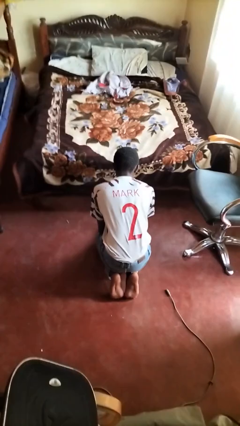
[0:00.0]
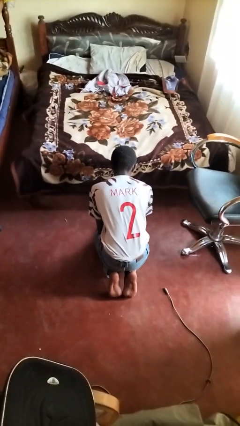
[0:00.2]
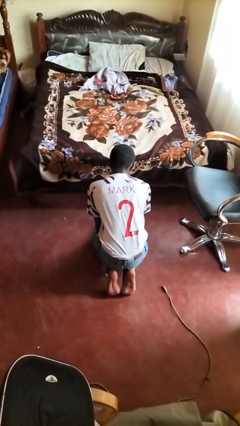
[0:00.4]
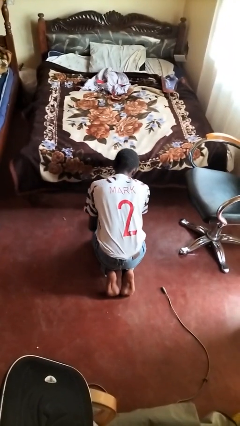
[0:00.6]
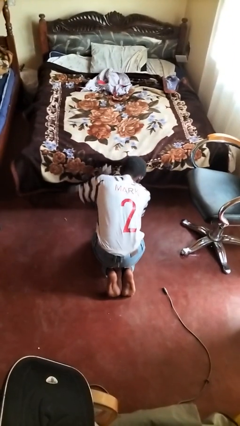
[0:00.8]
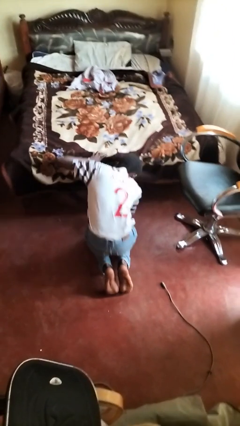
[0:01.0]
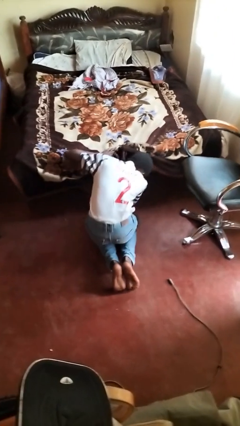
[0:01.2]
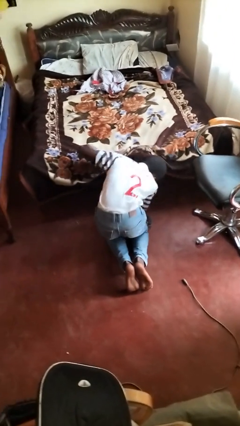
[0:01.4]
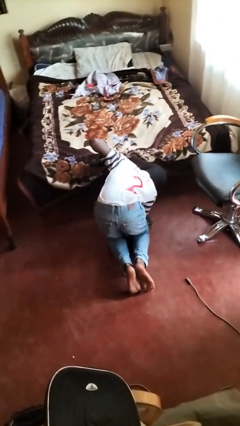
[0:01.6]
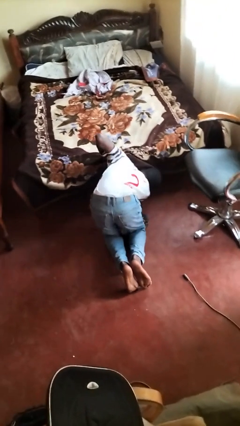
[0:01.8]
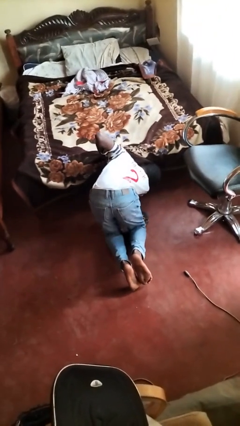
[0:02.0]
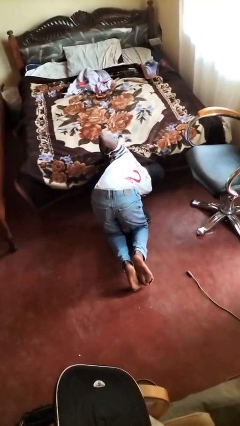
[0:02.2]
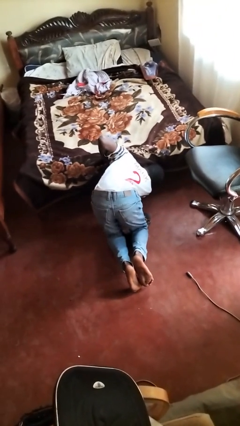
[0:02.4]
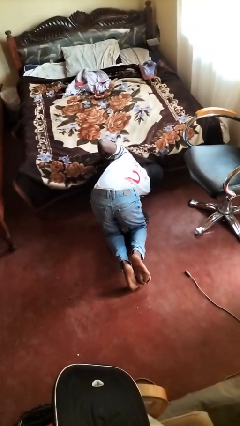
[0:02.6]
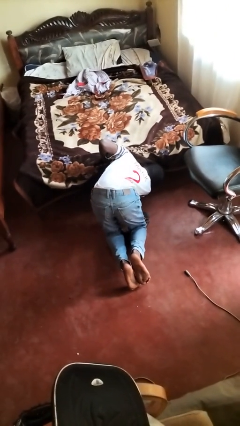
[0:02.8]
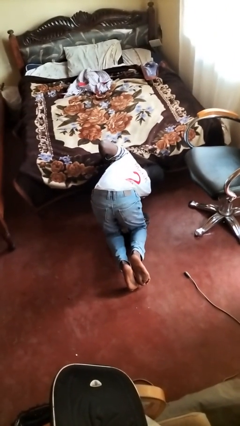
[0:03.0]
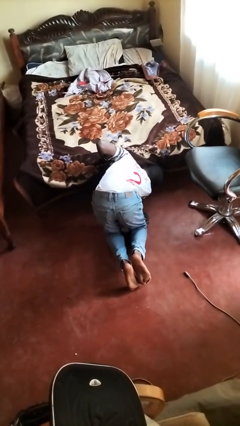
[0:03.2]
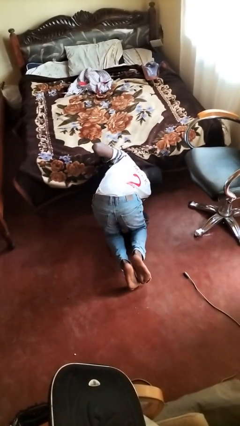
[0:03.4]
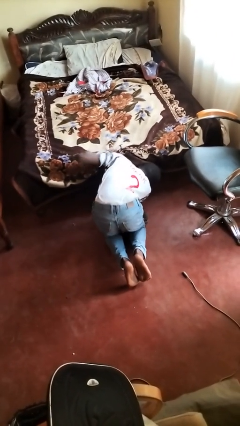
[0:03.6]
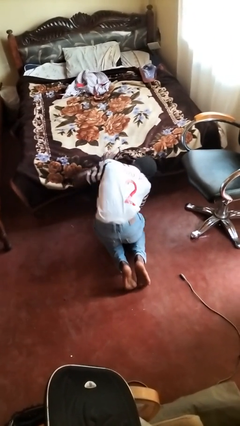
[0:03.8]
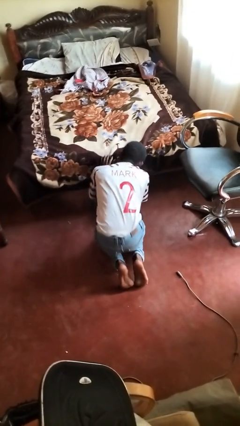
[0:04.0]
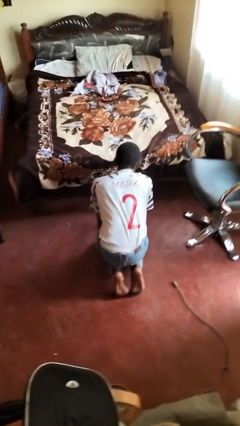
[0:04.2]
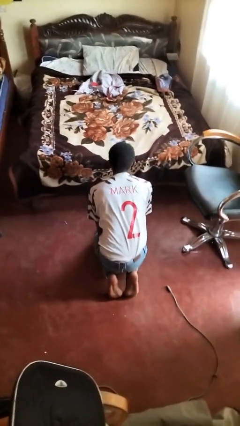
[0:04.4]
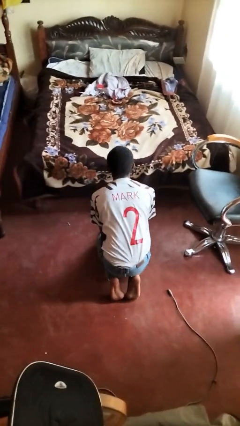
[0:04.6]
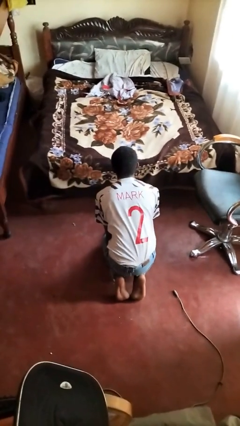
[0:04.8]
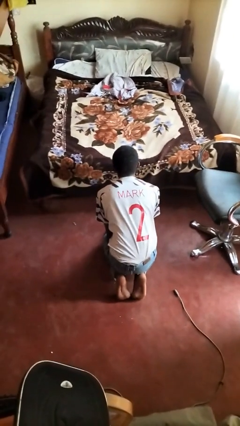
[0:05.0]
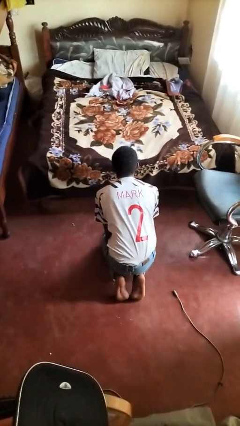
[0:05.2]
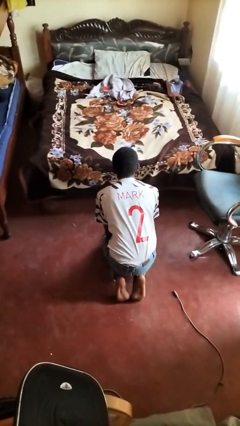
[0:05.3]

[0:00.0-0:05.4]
person searches under bed

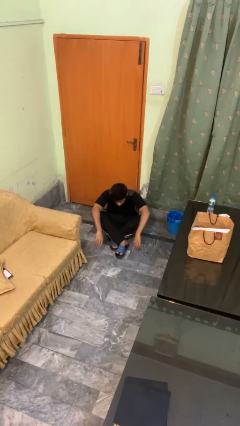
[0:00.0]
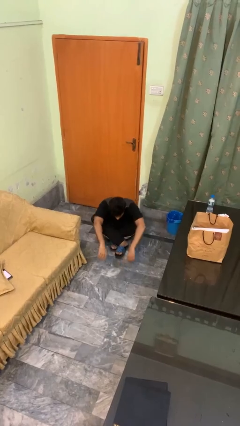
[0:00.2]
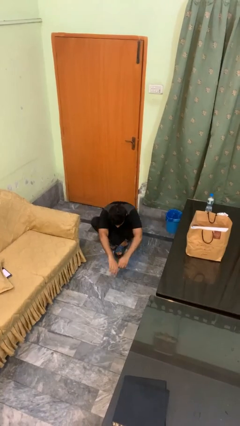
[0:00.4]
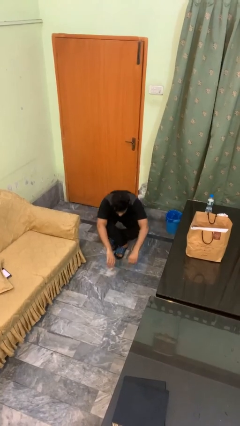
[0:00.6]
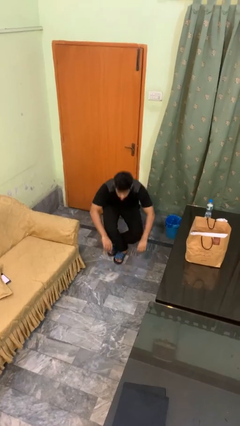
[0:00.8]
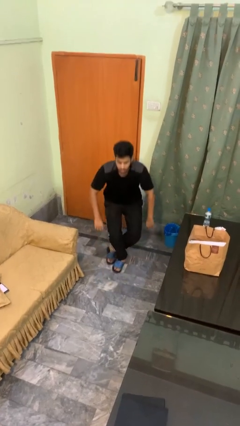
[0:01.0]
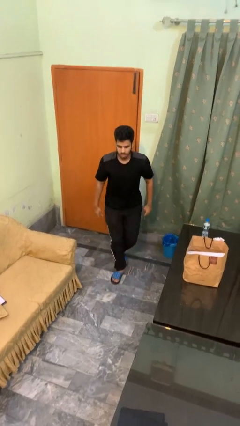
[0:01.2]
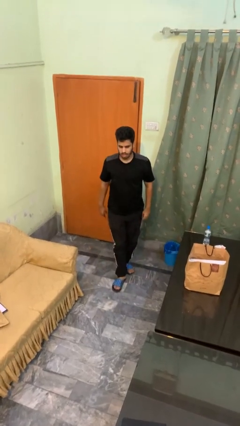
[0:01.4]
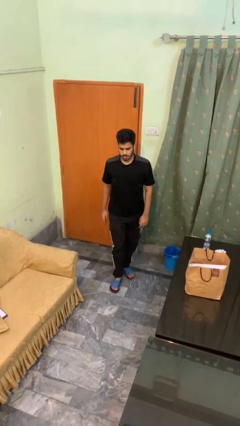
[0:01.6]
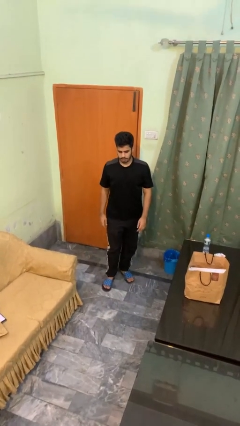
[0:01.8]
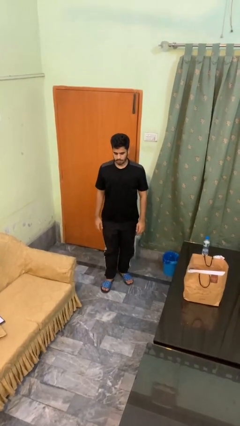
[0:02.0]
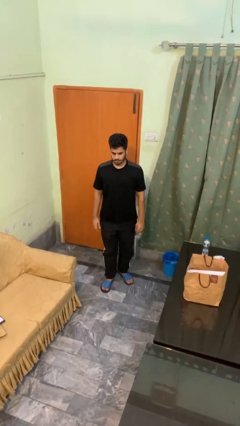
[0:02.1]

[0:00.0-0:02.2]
person stands up from floor

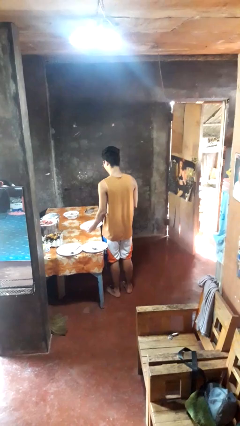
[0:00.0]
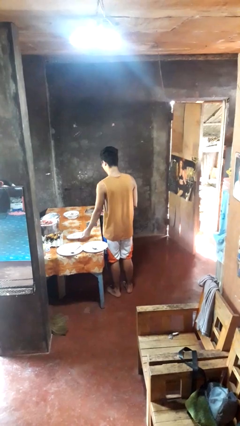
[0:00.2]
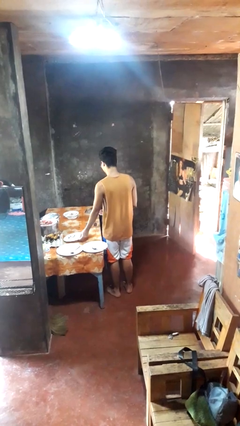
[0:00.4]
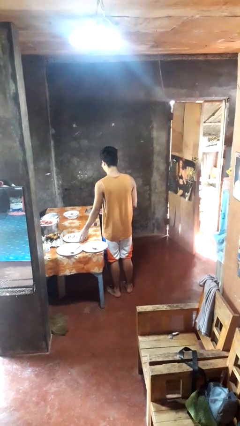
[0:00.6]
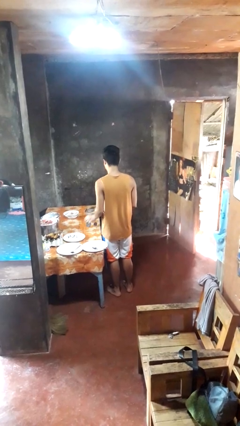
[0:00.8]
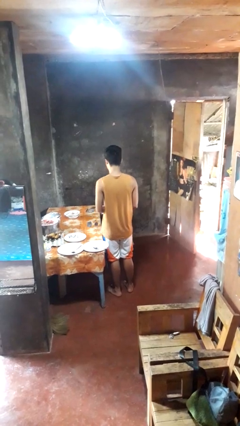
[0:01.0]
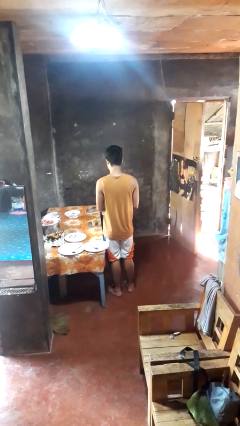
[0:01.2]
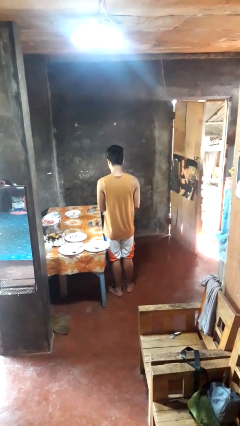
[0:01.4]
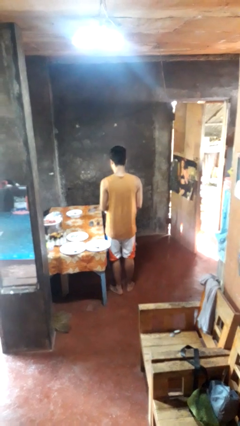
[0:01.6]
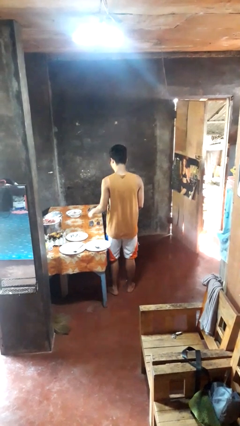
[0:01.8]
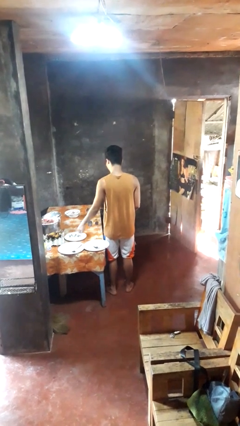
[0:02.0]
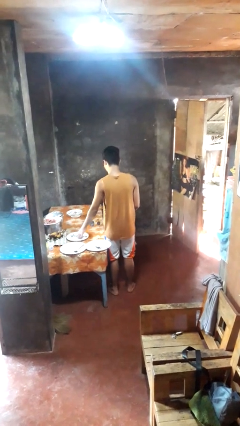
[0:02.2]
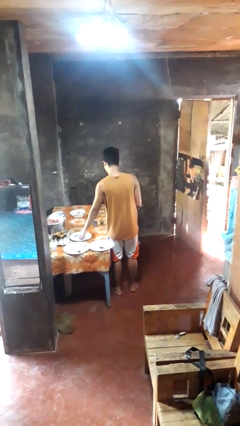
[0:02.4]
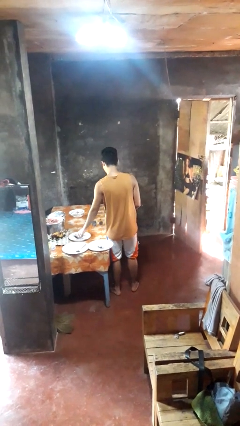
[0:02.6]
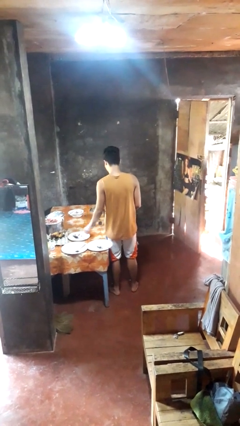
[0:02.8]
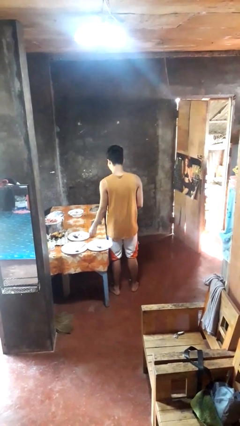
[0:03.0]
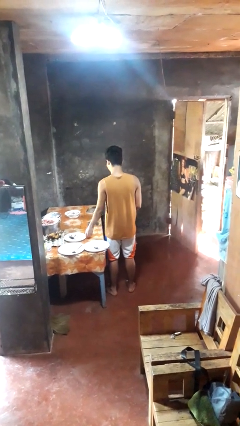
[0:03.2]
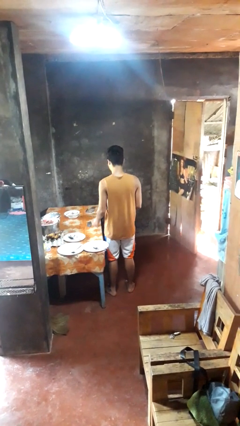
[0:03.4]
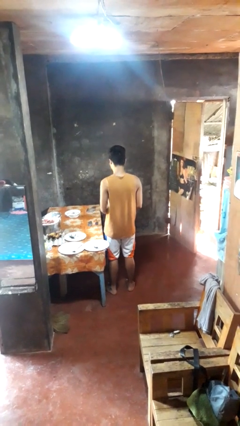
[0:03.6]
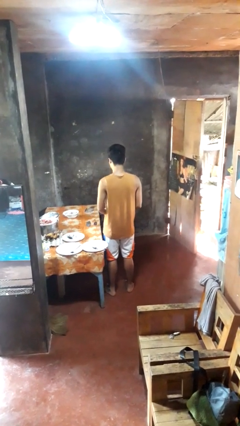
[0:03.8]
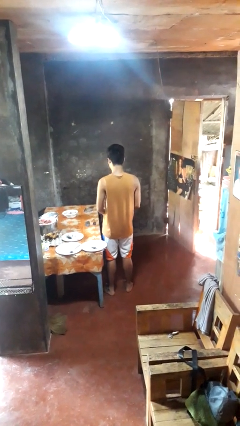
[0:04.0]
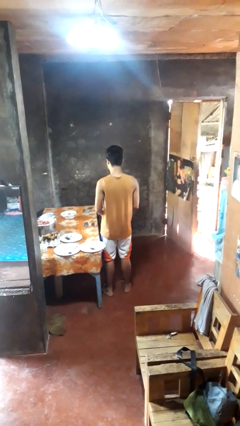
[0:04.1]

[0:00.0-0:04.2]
person sets table

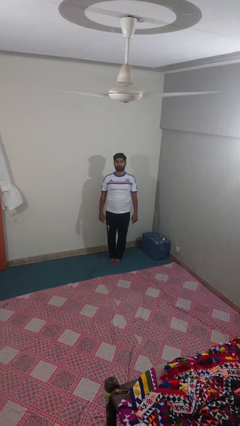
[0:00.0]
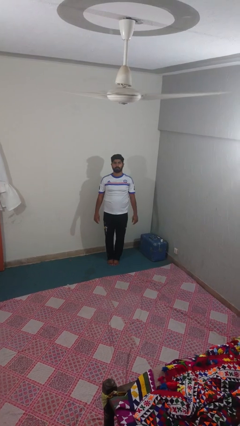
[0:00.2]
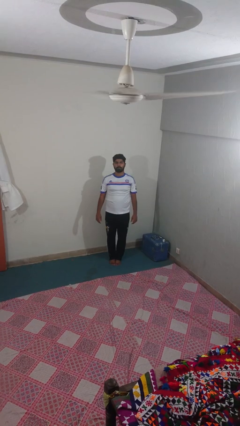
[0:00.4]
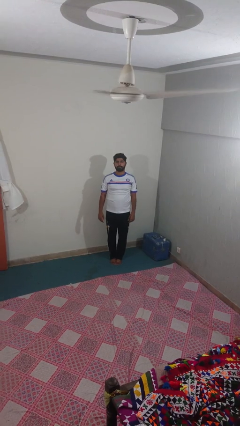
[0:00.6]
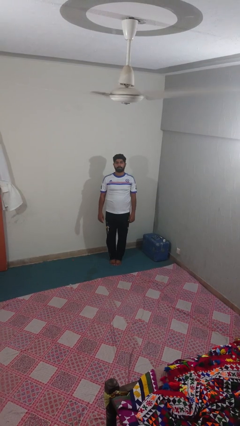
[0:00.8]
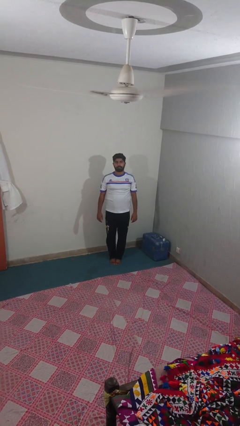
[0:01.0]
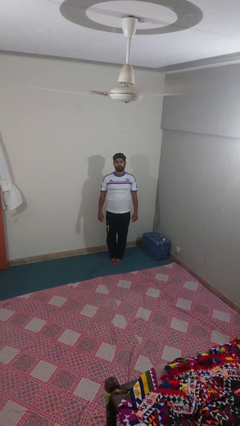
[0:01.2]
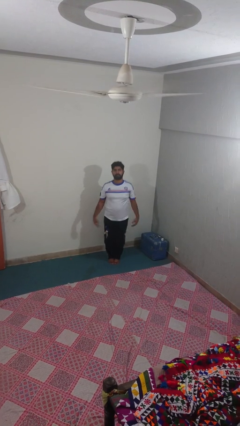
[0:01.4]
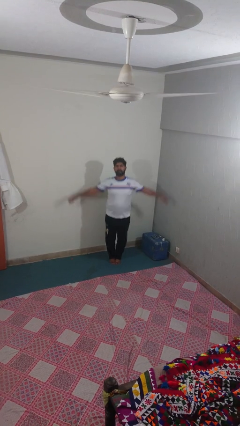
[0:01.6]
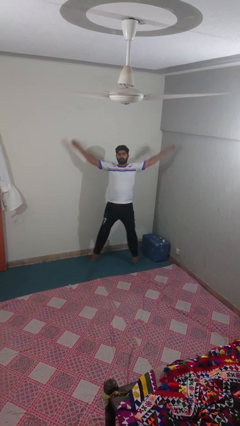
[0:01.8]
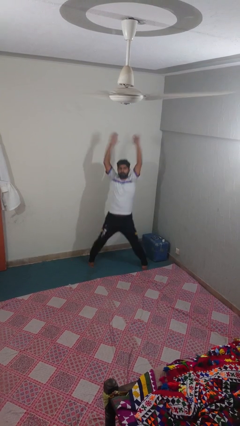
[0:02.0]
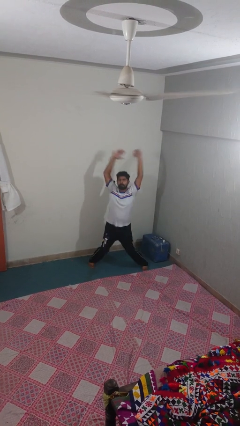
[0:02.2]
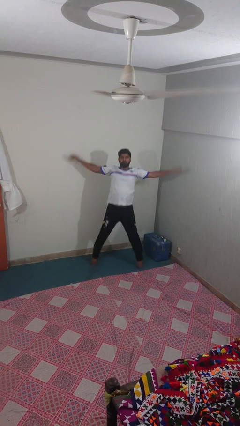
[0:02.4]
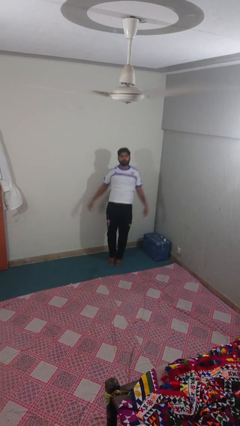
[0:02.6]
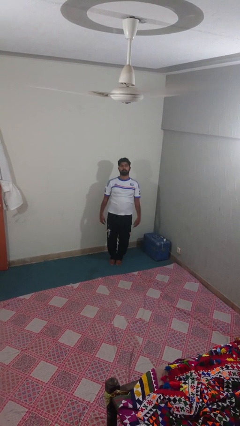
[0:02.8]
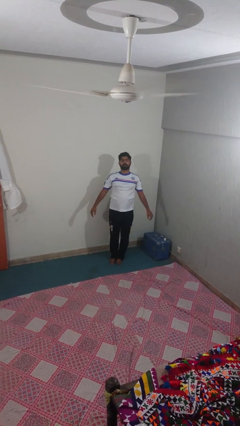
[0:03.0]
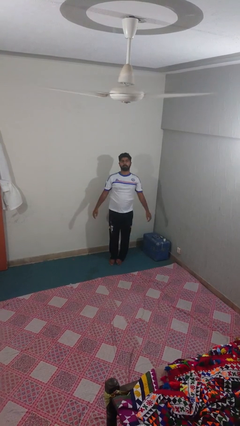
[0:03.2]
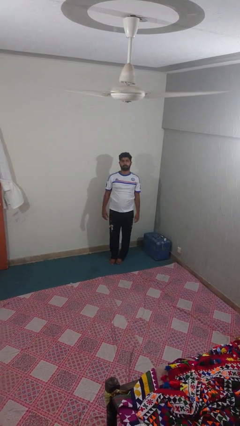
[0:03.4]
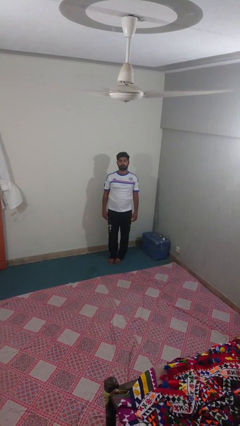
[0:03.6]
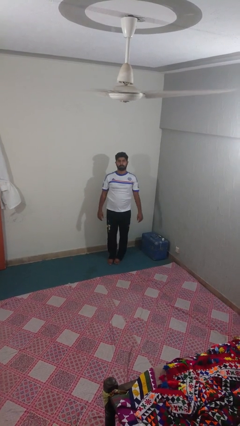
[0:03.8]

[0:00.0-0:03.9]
person exercises with jumping jacks

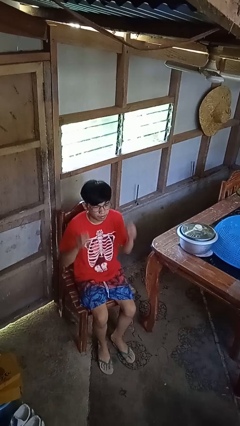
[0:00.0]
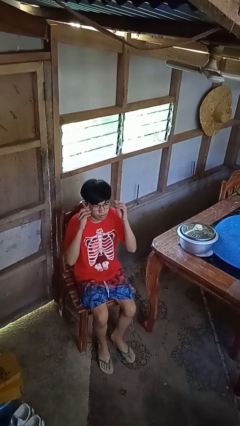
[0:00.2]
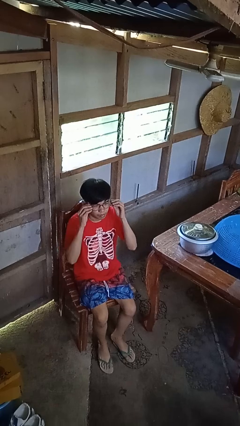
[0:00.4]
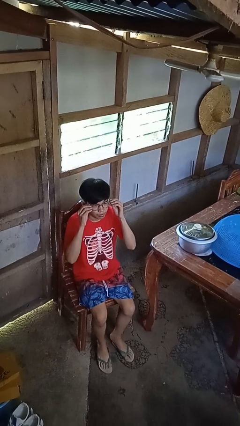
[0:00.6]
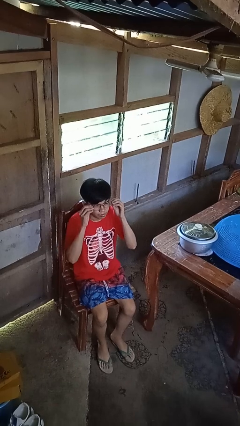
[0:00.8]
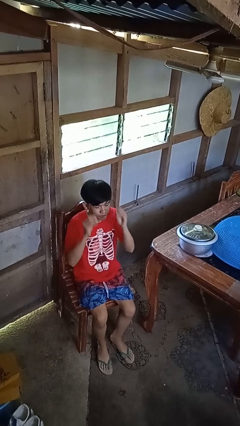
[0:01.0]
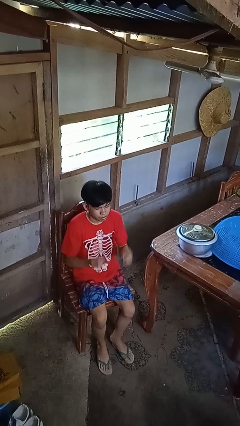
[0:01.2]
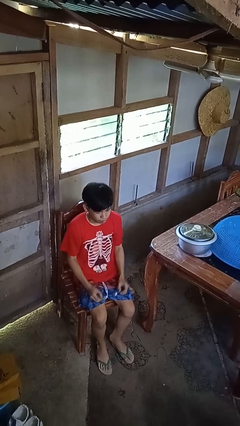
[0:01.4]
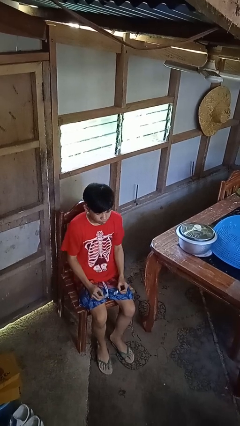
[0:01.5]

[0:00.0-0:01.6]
person takes off glasses
